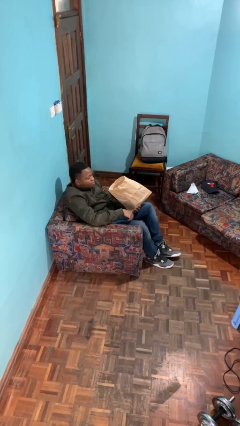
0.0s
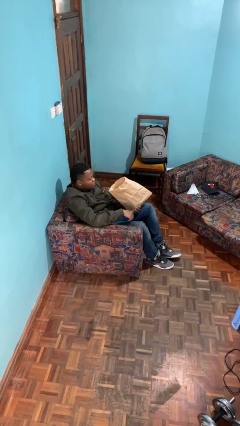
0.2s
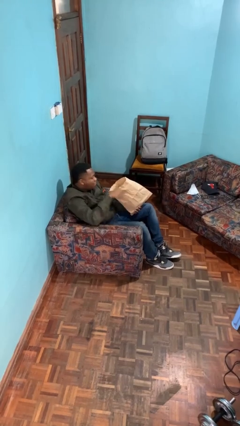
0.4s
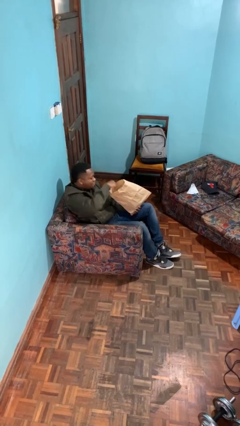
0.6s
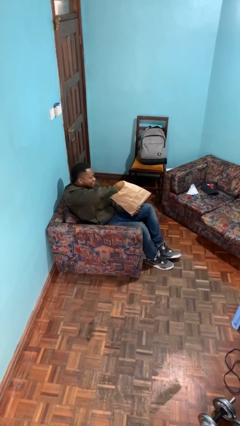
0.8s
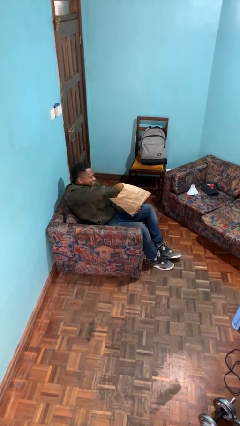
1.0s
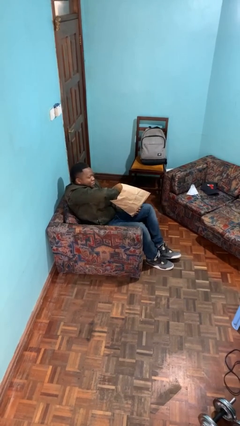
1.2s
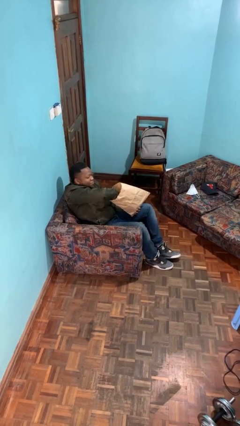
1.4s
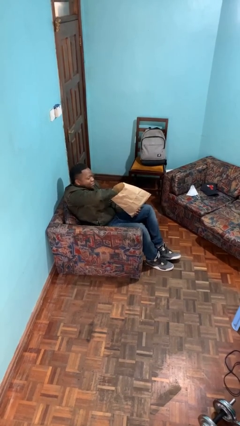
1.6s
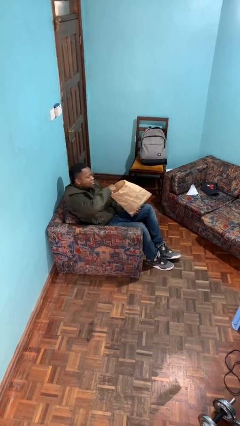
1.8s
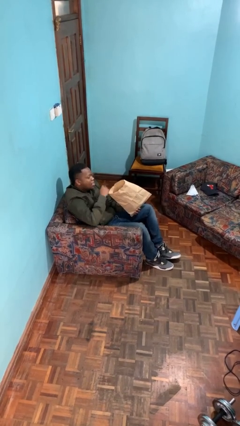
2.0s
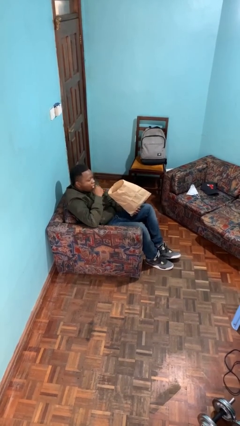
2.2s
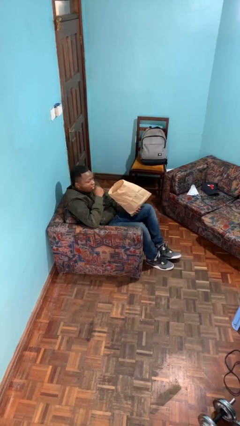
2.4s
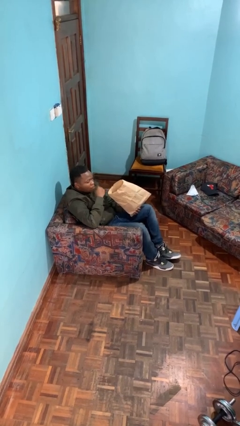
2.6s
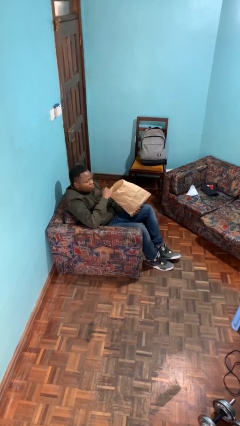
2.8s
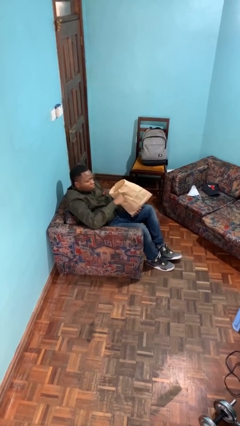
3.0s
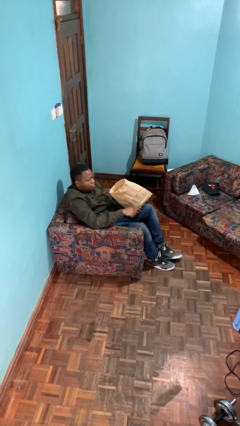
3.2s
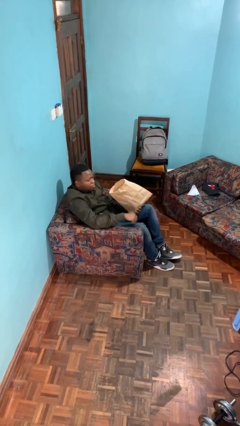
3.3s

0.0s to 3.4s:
person eats snack from bag

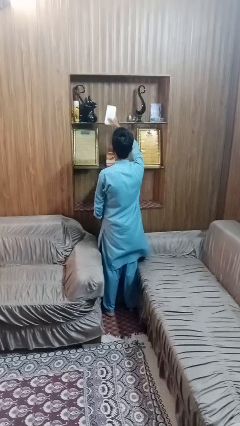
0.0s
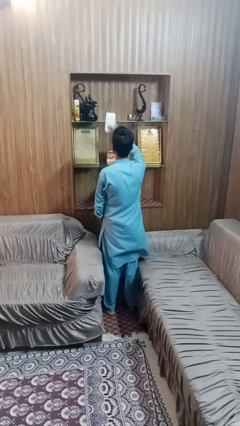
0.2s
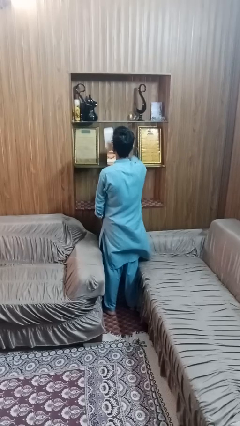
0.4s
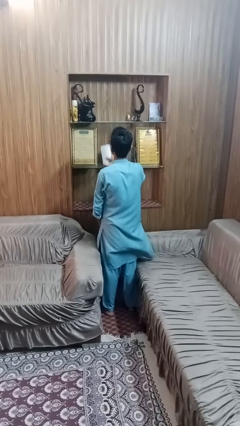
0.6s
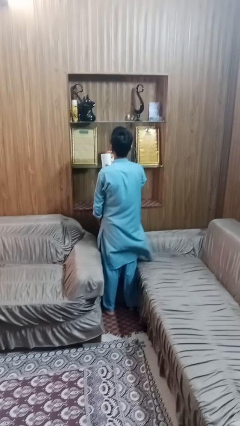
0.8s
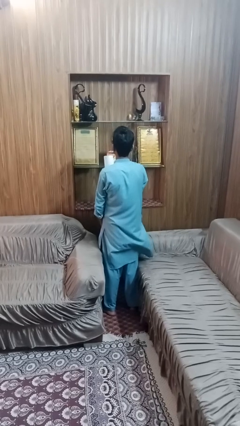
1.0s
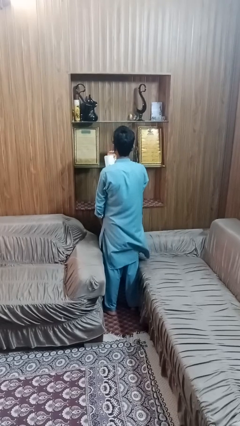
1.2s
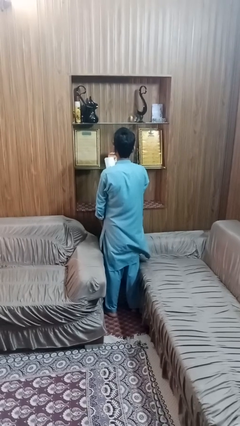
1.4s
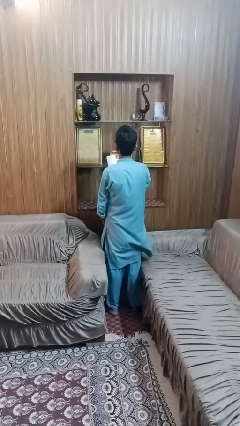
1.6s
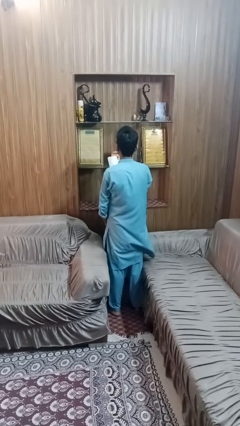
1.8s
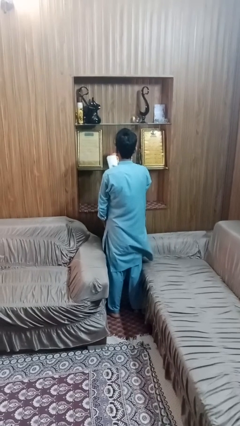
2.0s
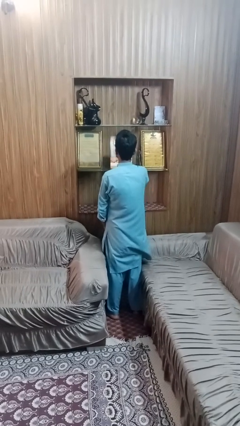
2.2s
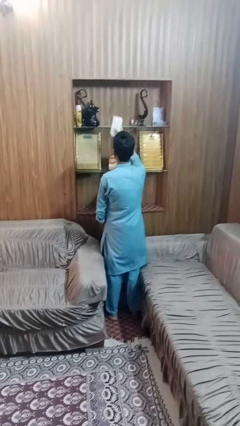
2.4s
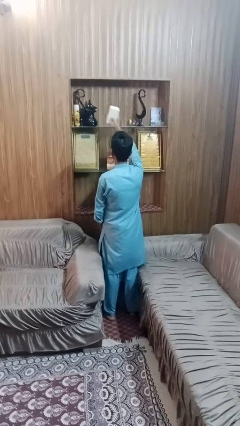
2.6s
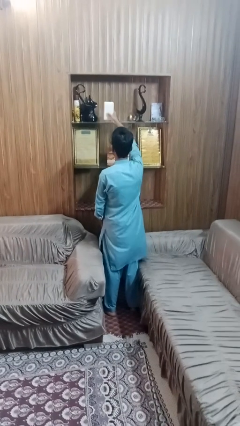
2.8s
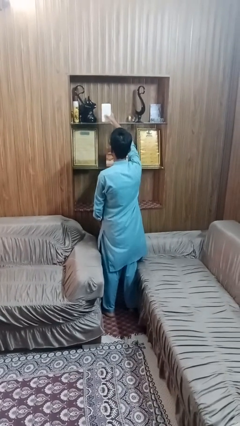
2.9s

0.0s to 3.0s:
person picks up object from shelf

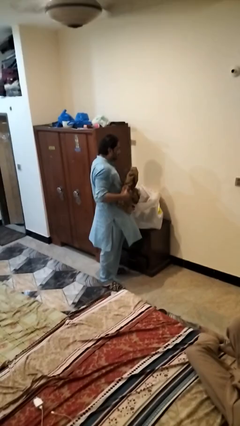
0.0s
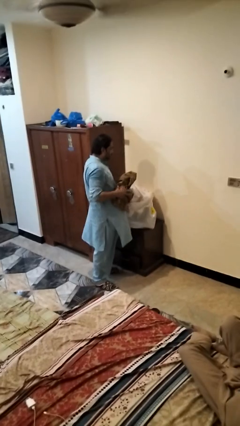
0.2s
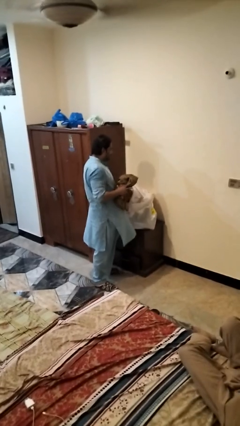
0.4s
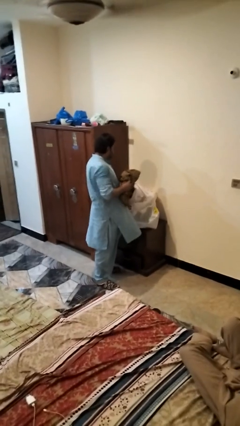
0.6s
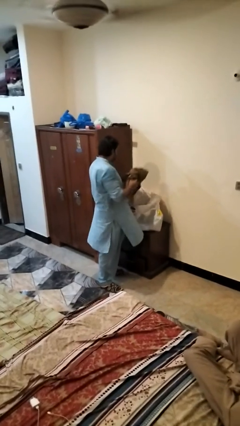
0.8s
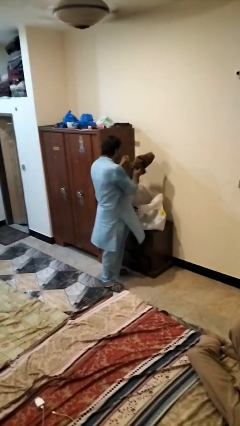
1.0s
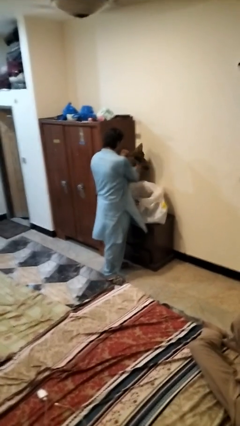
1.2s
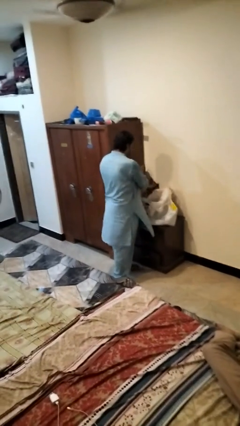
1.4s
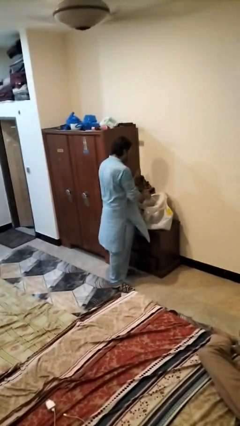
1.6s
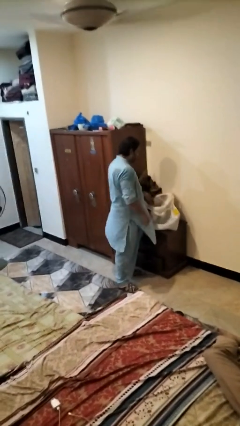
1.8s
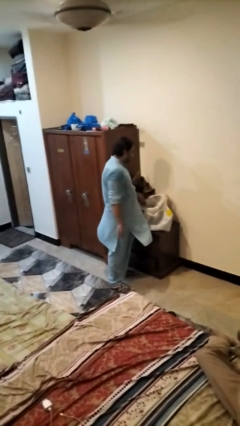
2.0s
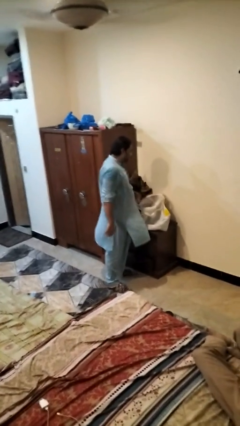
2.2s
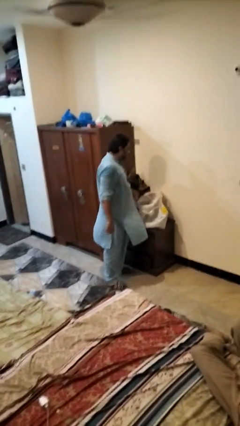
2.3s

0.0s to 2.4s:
person puts object into bag

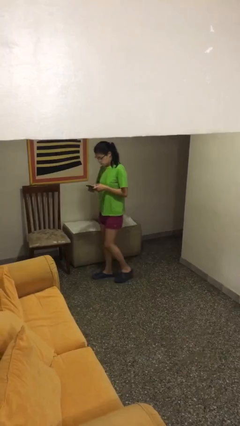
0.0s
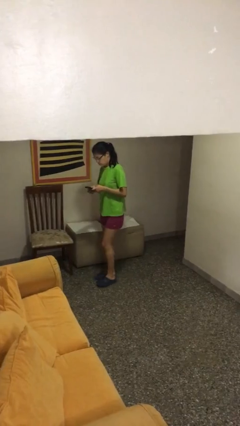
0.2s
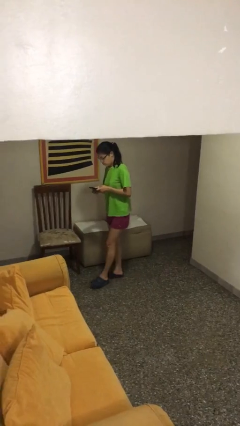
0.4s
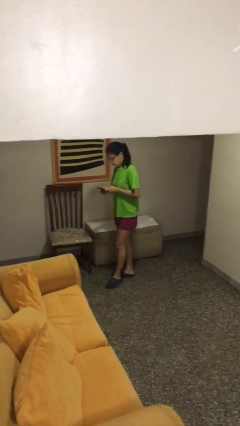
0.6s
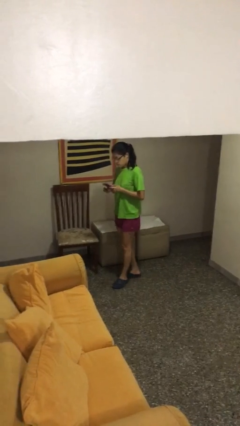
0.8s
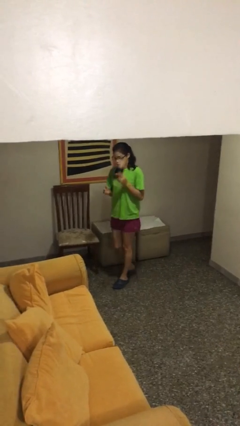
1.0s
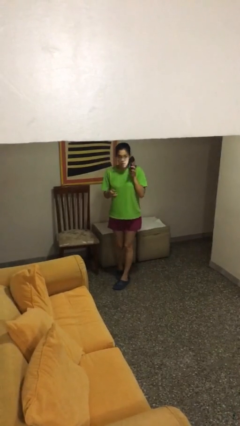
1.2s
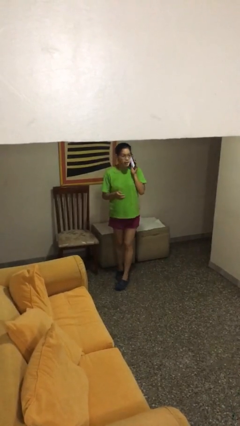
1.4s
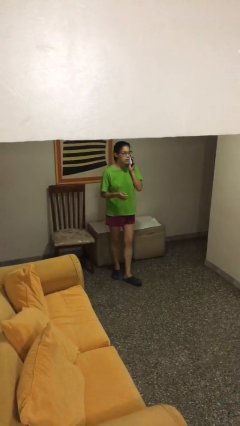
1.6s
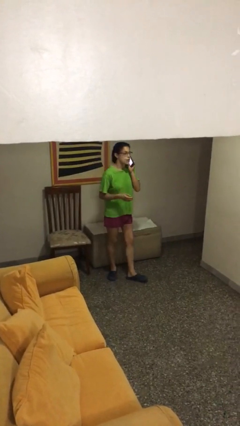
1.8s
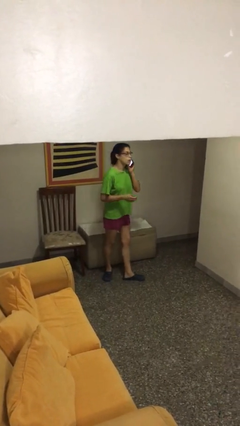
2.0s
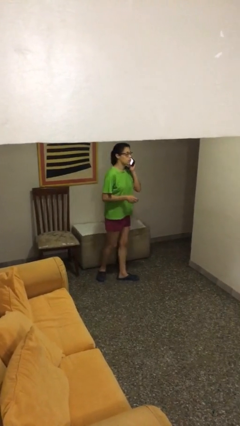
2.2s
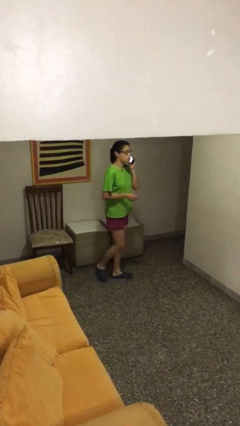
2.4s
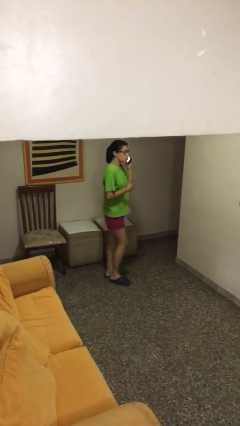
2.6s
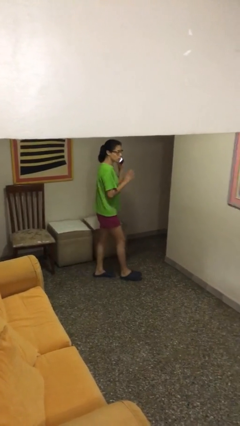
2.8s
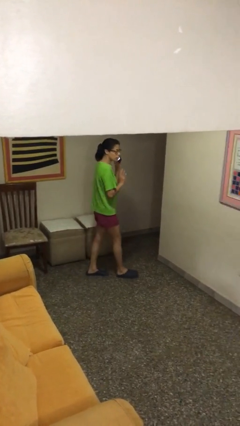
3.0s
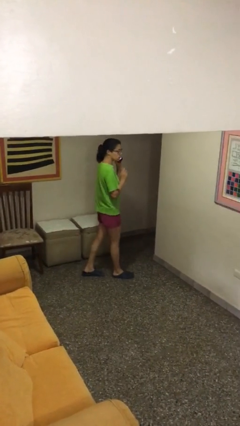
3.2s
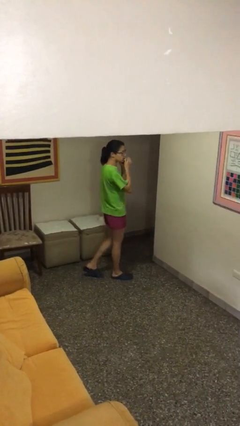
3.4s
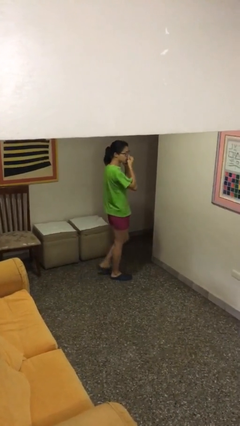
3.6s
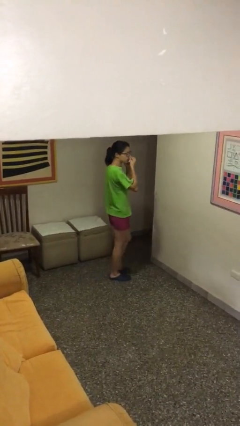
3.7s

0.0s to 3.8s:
person talks on phone

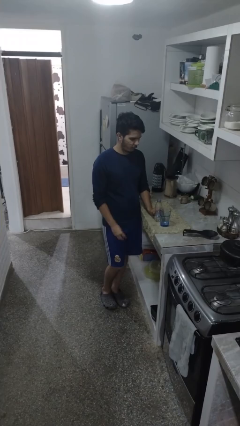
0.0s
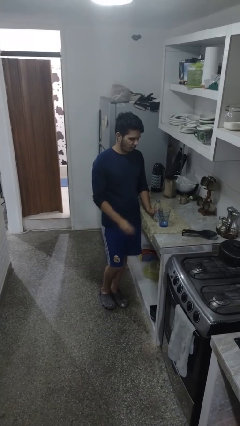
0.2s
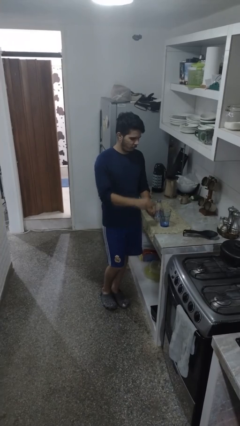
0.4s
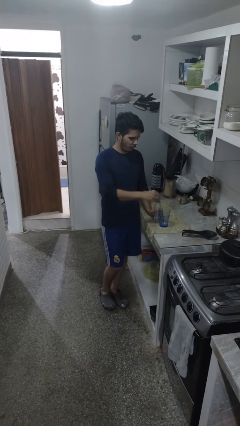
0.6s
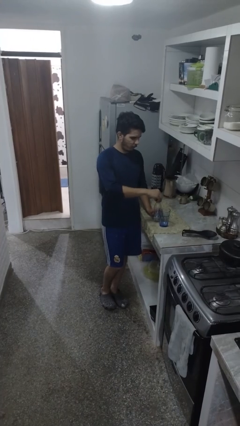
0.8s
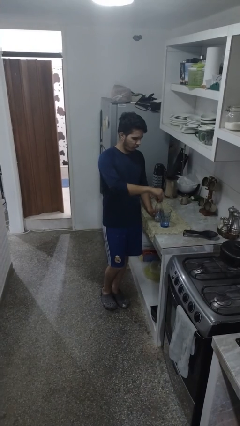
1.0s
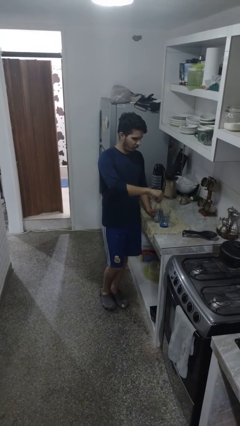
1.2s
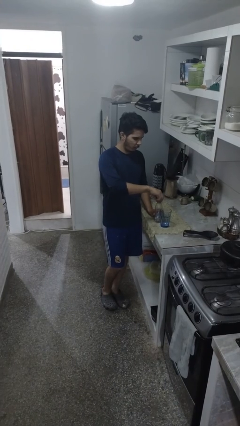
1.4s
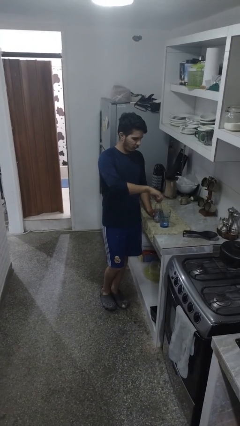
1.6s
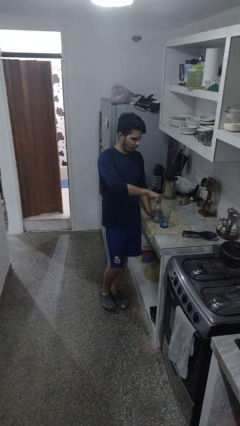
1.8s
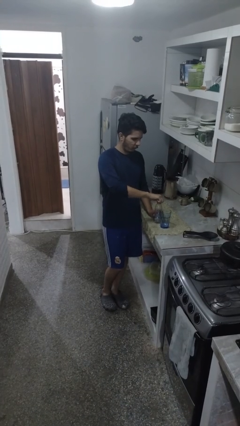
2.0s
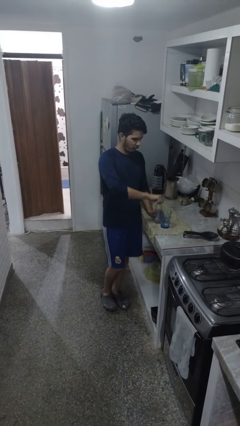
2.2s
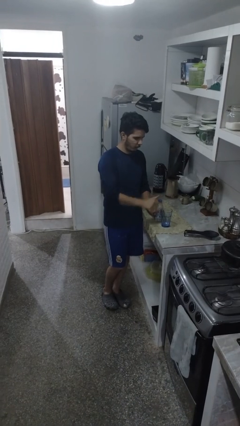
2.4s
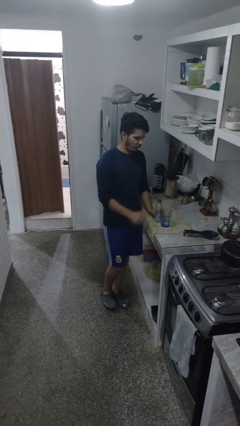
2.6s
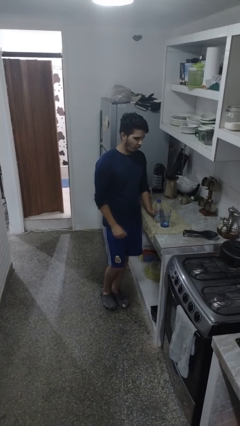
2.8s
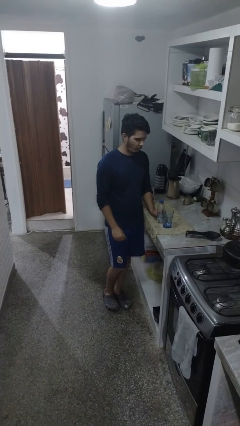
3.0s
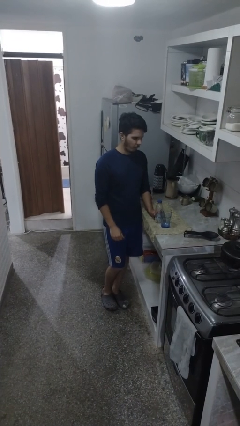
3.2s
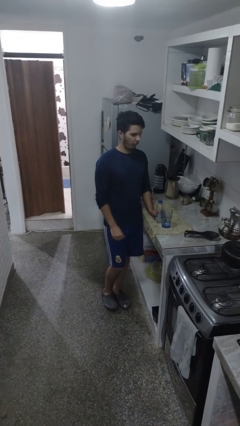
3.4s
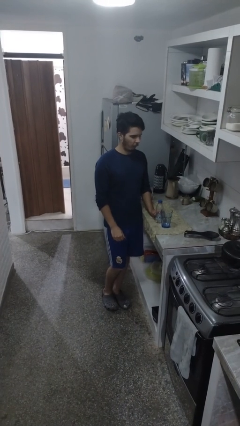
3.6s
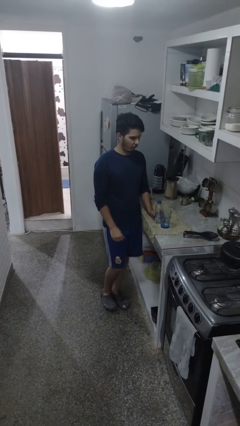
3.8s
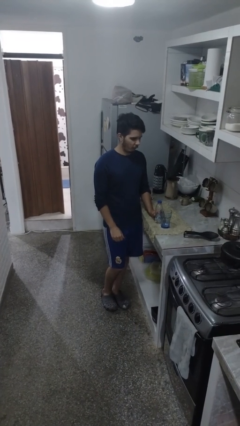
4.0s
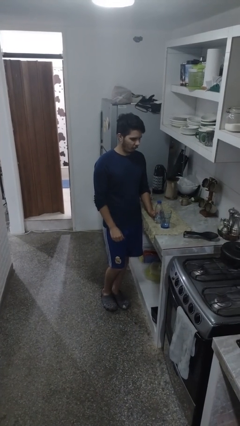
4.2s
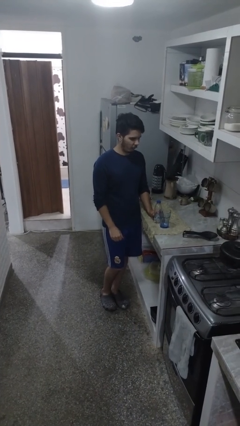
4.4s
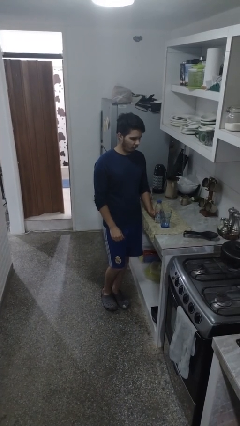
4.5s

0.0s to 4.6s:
person screws lid to bottle

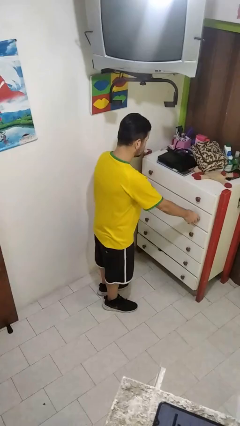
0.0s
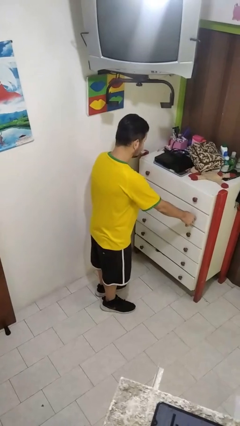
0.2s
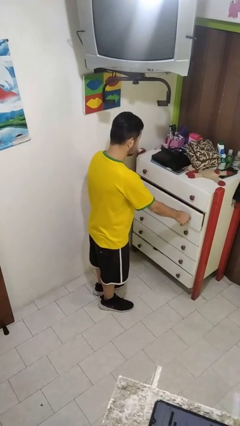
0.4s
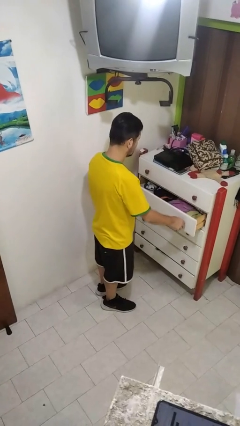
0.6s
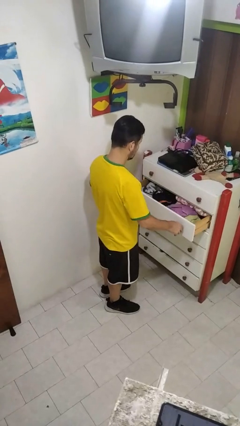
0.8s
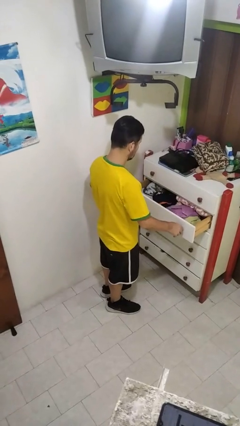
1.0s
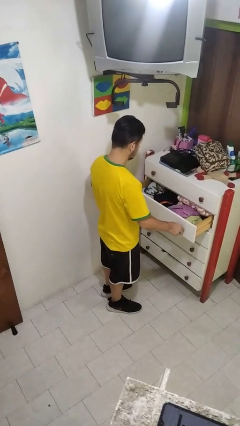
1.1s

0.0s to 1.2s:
person opens dresser drawer
